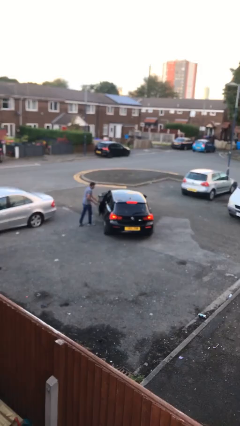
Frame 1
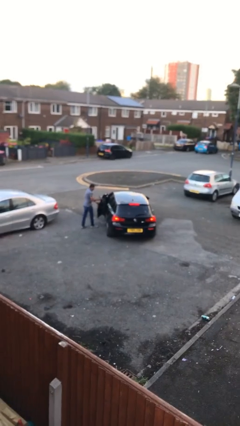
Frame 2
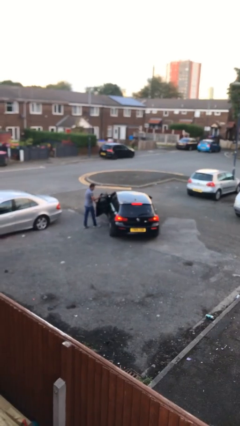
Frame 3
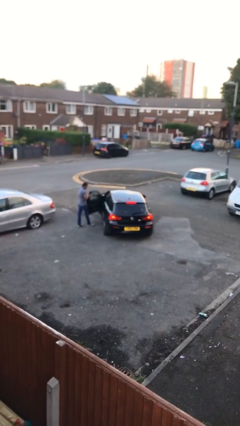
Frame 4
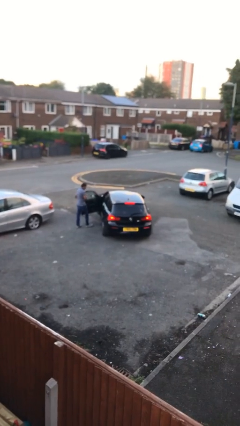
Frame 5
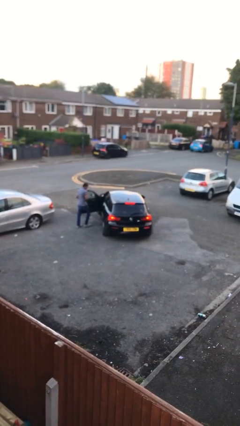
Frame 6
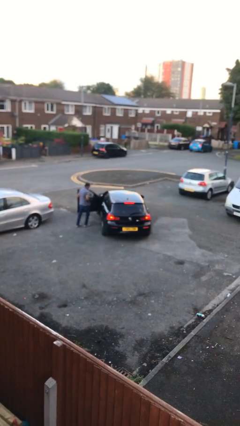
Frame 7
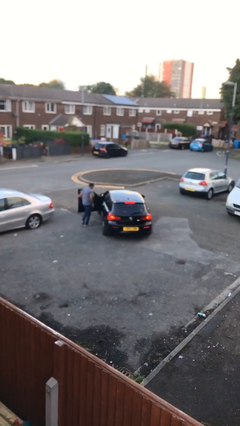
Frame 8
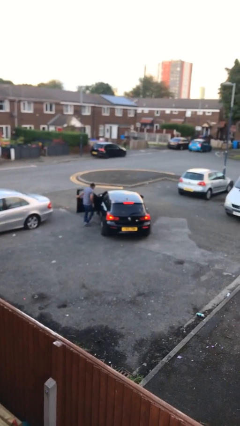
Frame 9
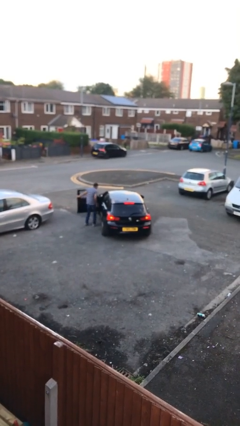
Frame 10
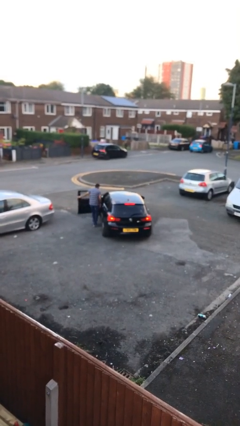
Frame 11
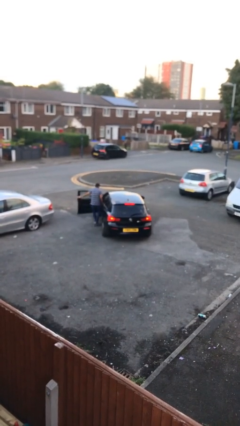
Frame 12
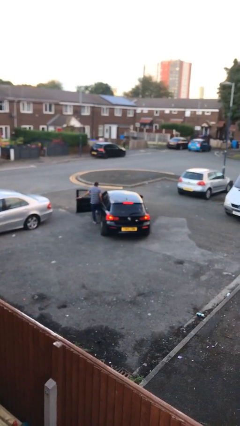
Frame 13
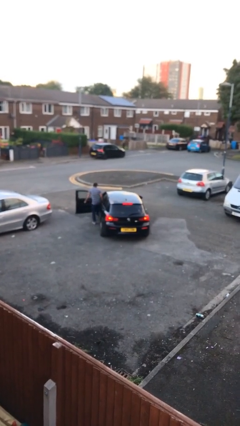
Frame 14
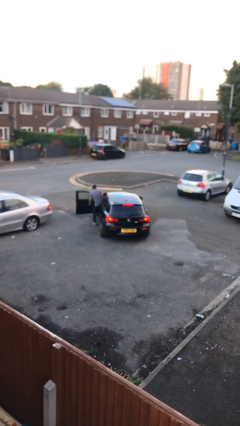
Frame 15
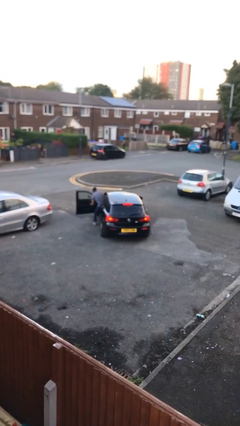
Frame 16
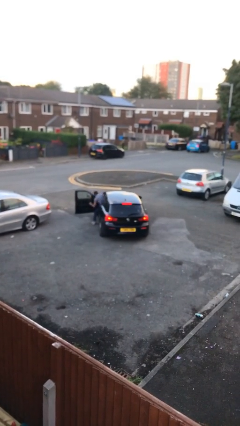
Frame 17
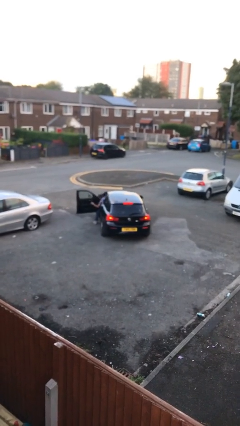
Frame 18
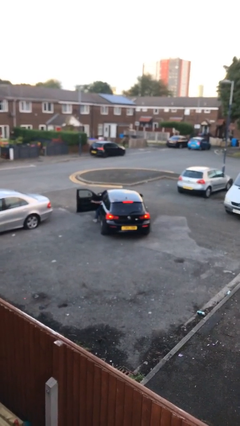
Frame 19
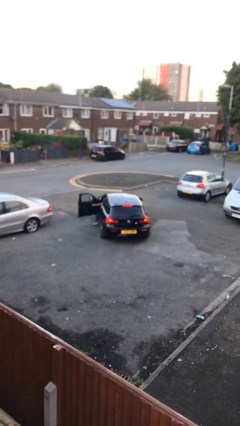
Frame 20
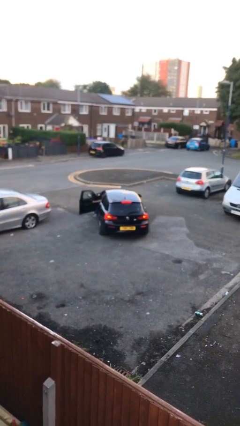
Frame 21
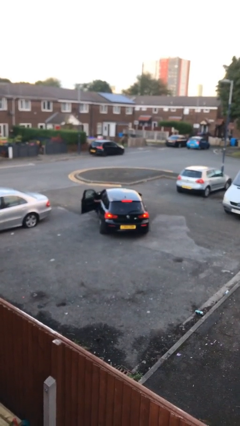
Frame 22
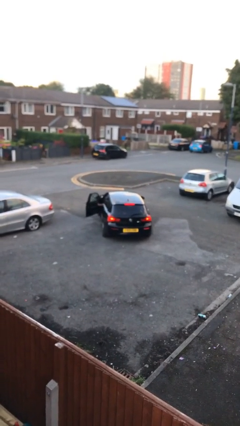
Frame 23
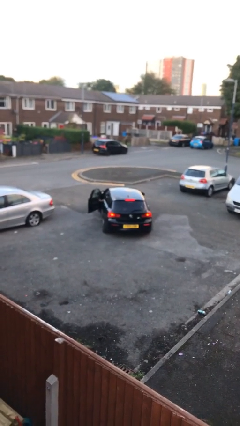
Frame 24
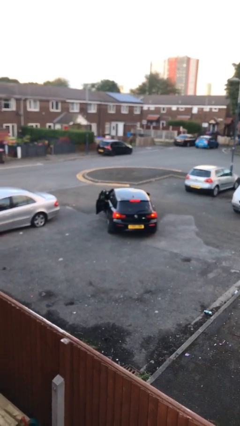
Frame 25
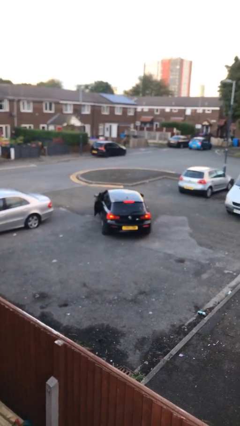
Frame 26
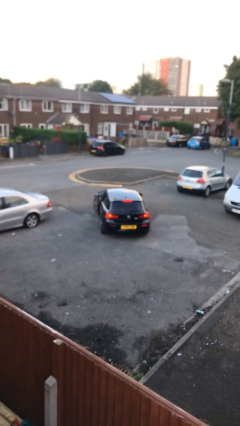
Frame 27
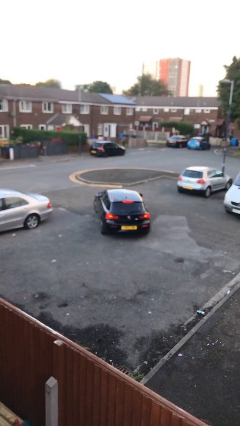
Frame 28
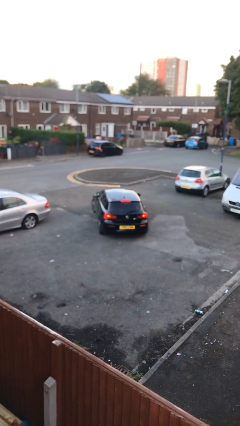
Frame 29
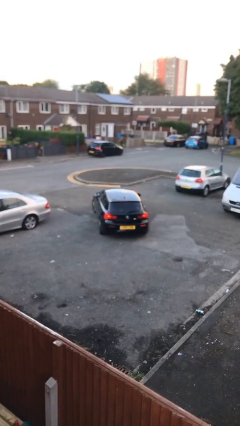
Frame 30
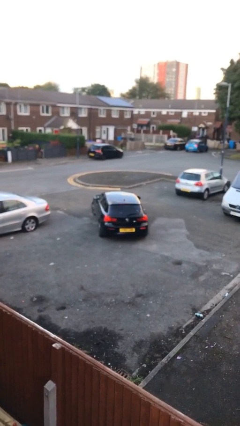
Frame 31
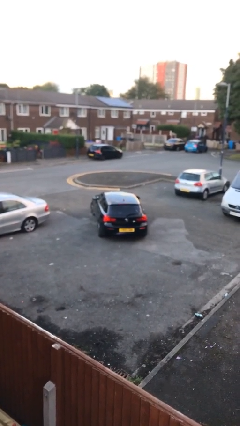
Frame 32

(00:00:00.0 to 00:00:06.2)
car picks up person

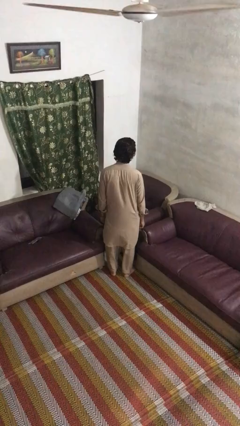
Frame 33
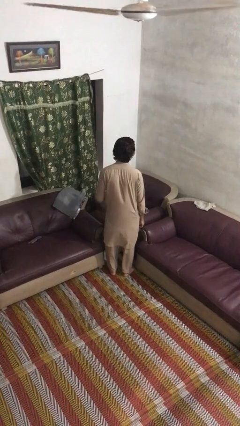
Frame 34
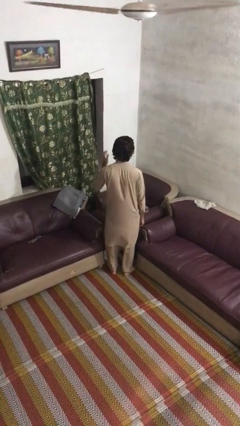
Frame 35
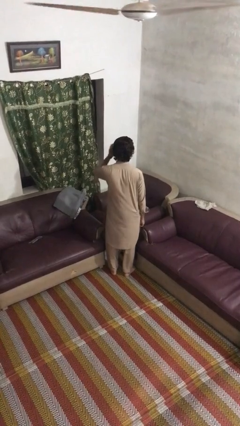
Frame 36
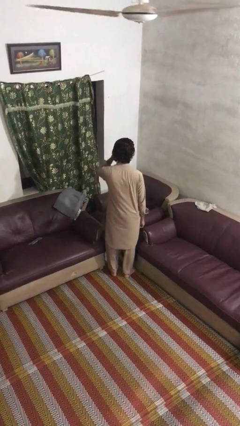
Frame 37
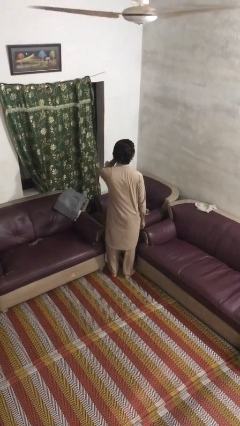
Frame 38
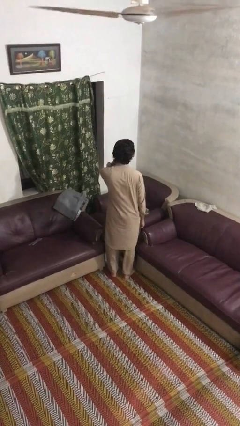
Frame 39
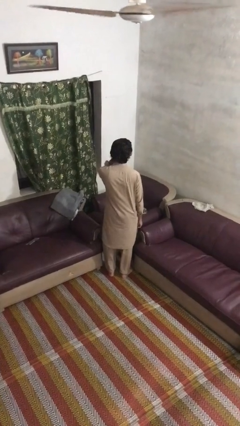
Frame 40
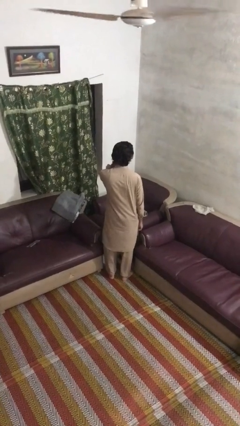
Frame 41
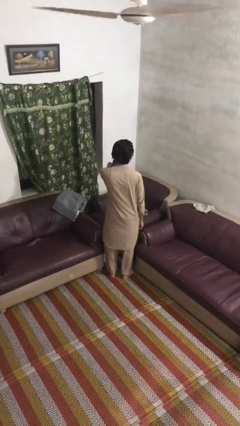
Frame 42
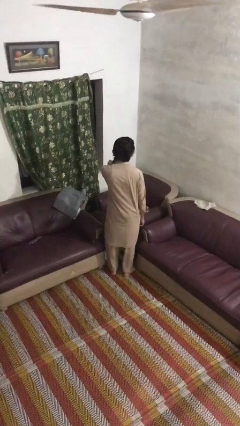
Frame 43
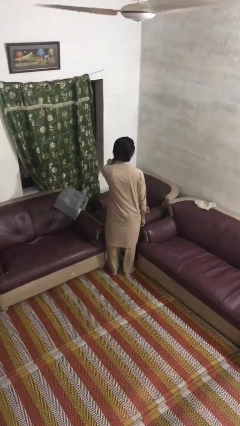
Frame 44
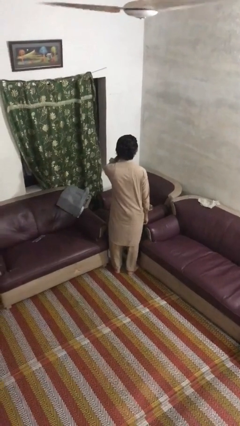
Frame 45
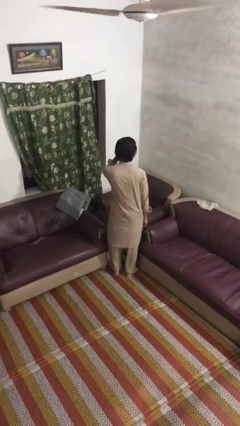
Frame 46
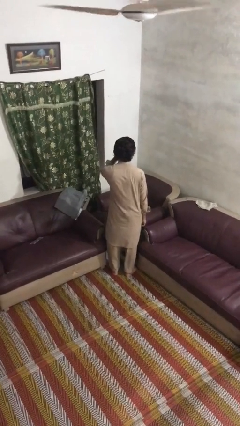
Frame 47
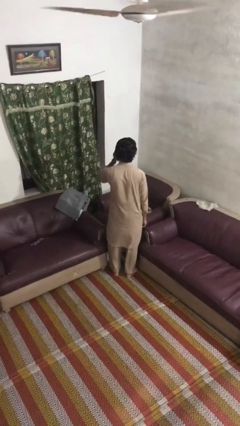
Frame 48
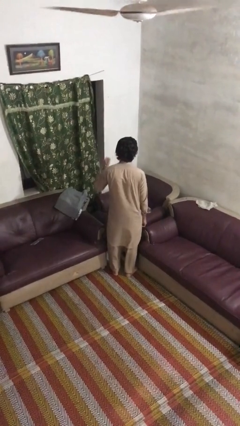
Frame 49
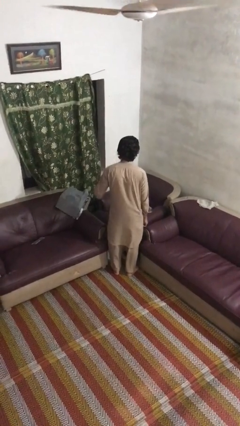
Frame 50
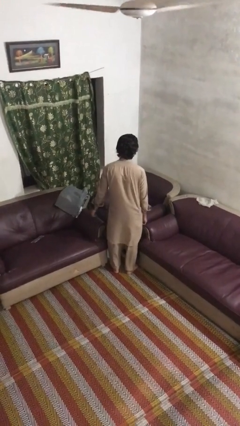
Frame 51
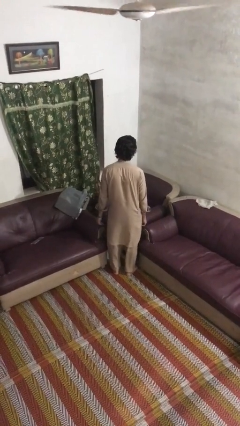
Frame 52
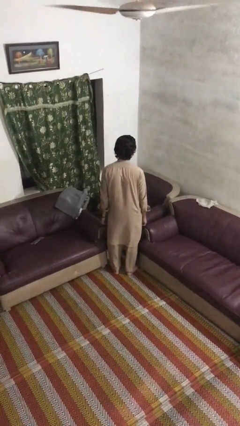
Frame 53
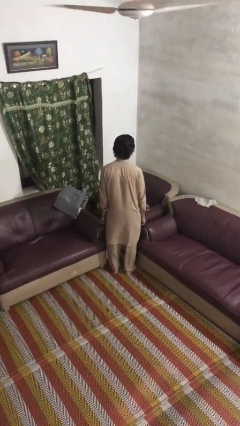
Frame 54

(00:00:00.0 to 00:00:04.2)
person scratches face

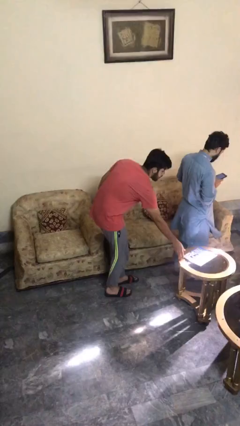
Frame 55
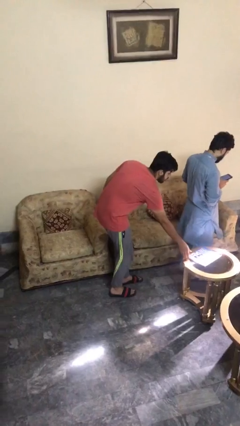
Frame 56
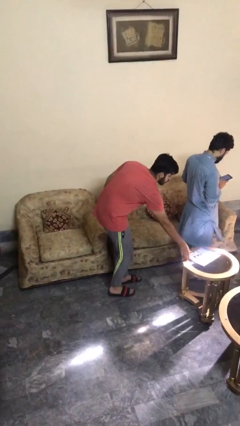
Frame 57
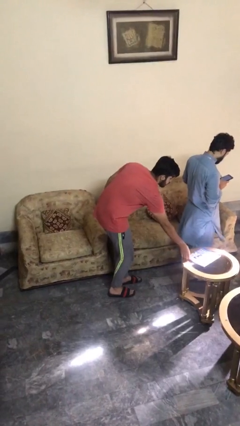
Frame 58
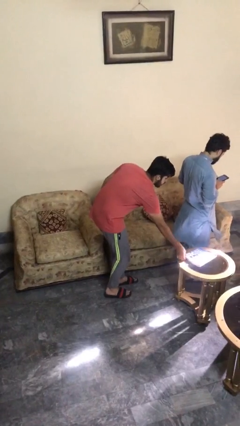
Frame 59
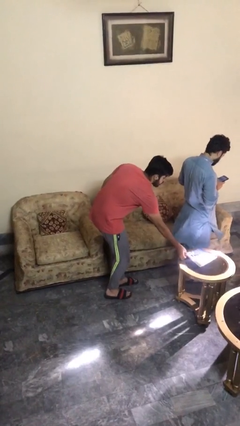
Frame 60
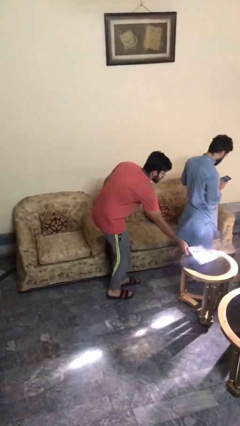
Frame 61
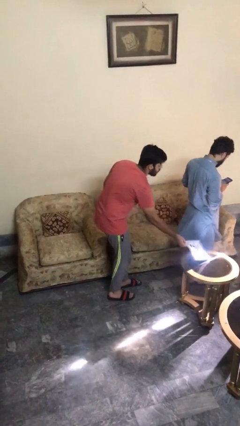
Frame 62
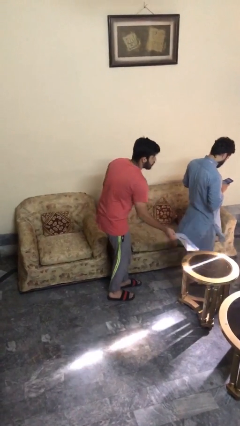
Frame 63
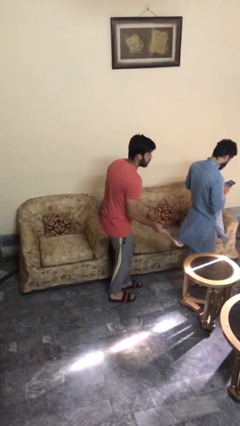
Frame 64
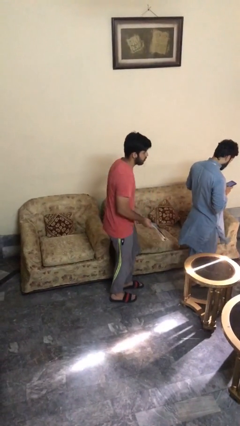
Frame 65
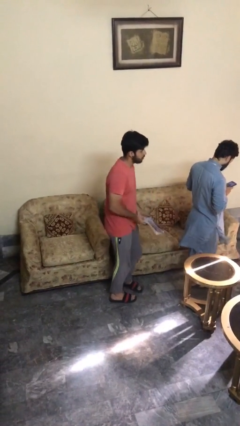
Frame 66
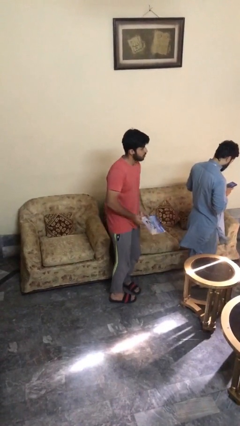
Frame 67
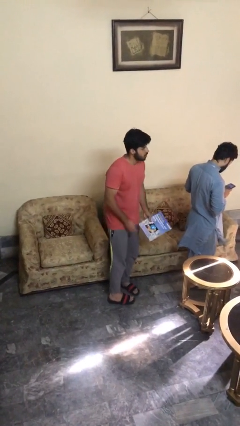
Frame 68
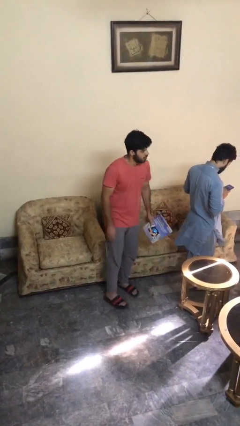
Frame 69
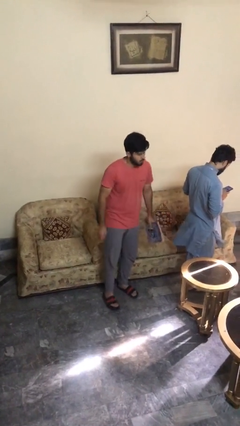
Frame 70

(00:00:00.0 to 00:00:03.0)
person steals object from person

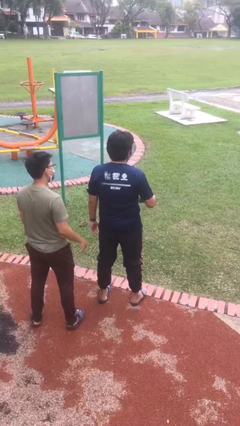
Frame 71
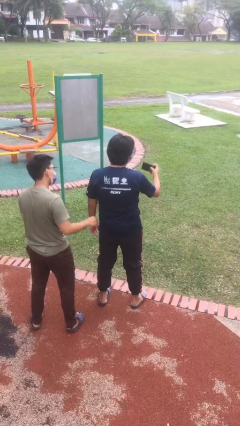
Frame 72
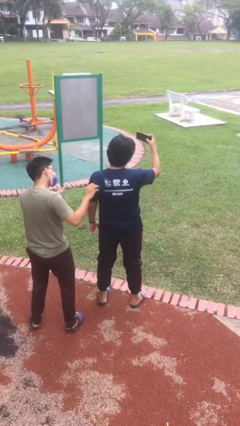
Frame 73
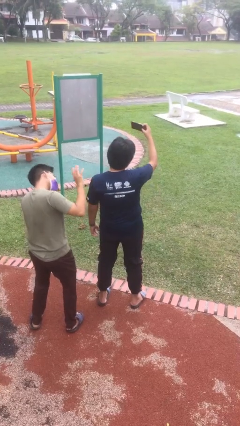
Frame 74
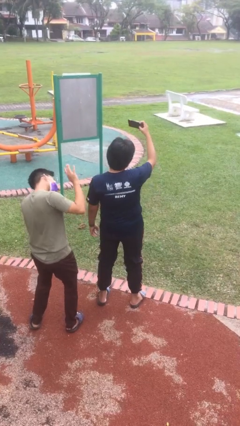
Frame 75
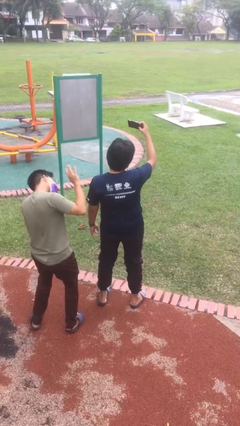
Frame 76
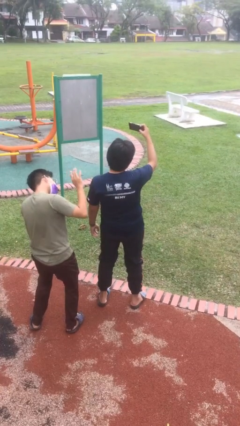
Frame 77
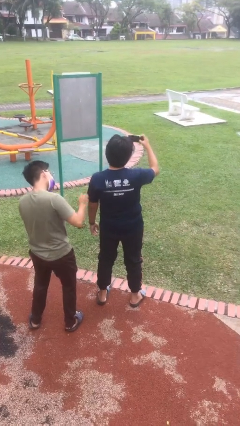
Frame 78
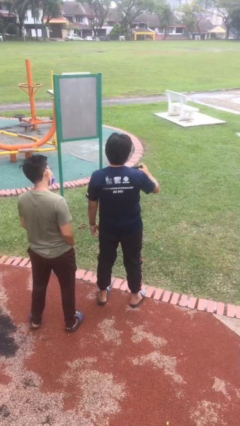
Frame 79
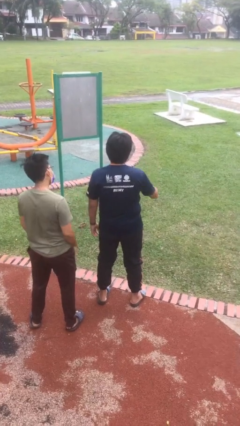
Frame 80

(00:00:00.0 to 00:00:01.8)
person takes selfie with person

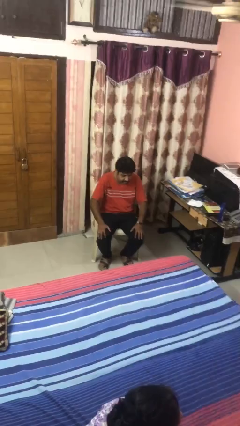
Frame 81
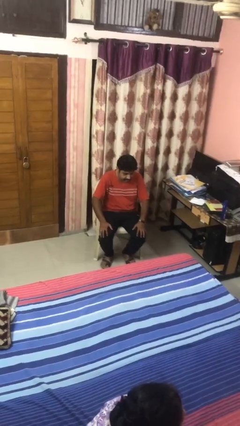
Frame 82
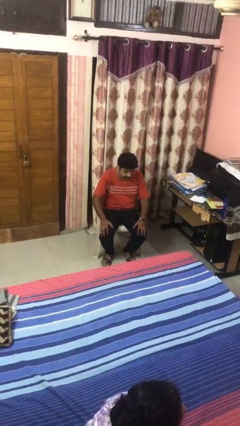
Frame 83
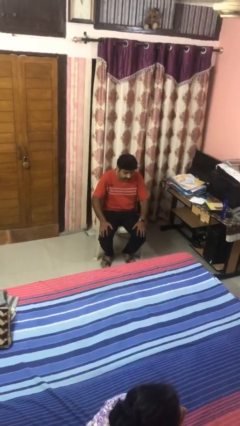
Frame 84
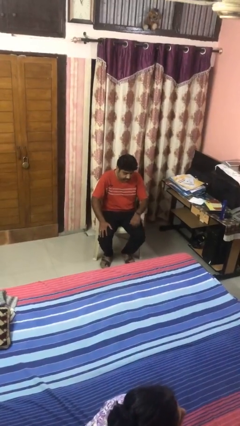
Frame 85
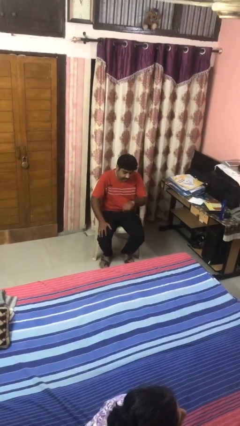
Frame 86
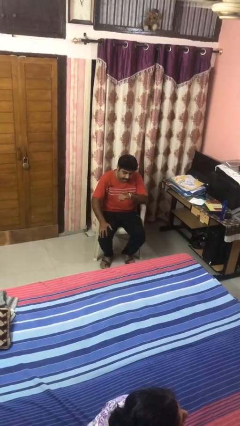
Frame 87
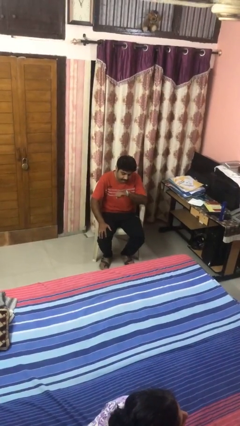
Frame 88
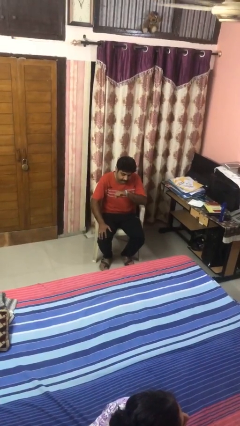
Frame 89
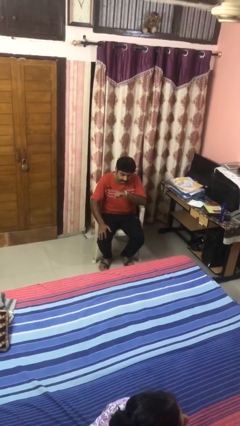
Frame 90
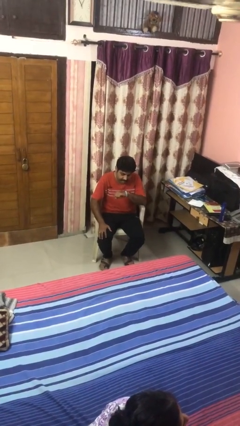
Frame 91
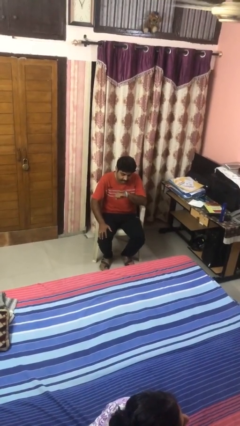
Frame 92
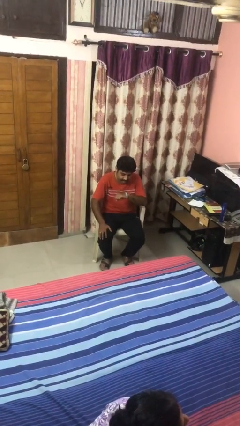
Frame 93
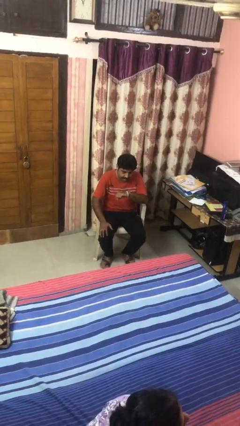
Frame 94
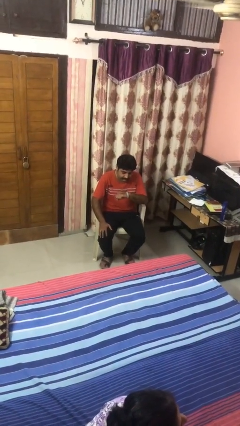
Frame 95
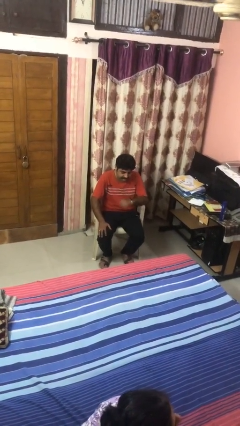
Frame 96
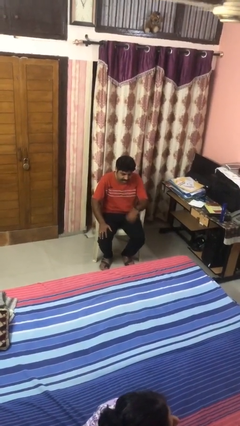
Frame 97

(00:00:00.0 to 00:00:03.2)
person looks at wristwatch
